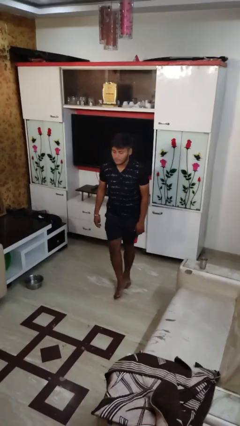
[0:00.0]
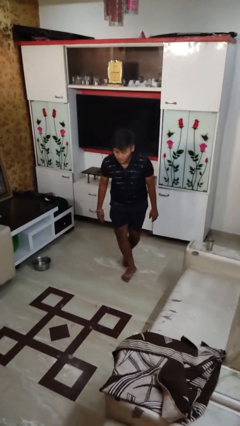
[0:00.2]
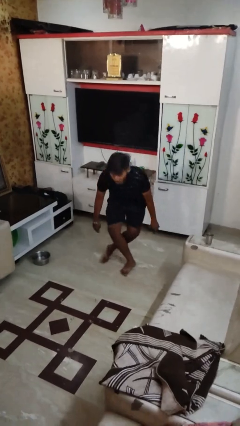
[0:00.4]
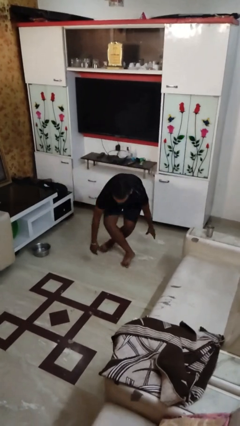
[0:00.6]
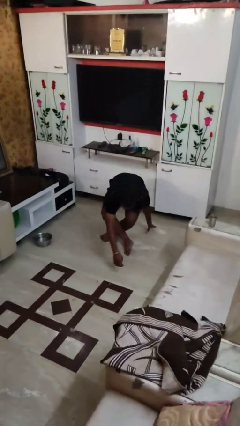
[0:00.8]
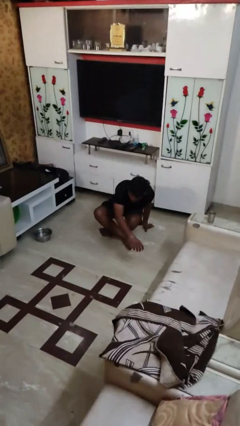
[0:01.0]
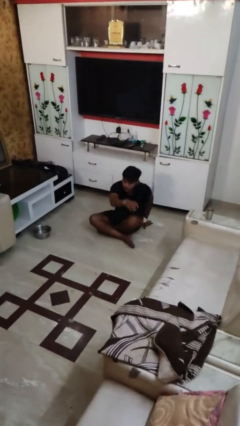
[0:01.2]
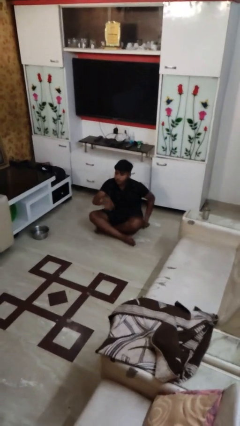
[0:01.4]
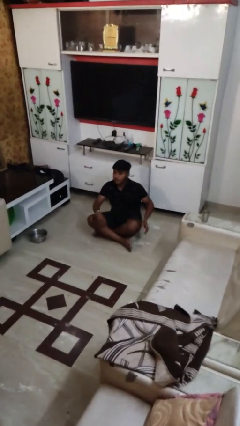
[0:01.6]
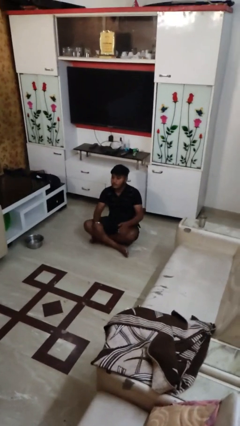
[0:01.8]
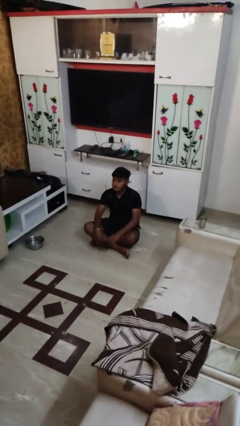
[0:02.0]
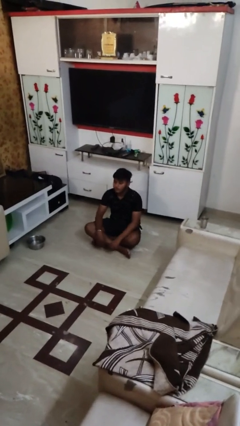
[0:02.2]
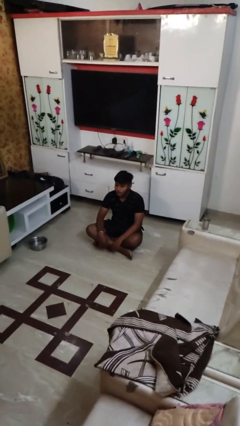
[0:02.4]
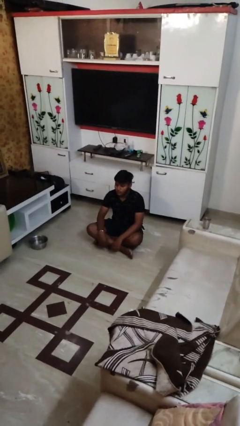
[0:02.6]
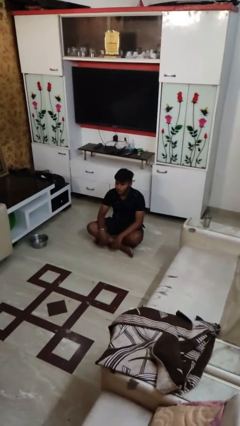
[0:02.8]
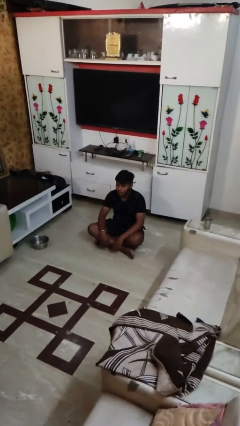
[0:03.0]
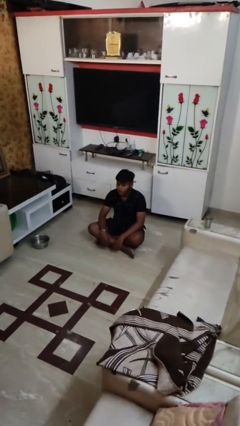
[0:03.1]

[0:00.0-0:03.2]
person sits crisscross

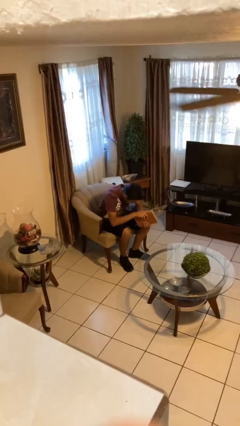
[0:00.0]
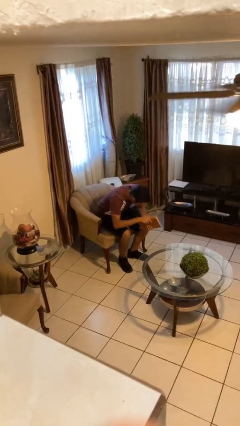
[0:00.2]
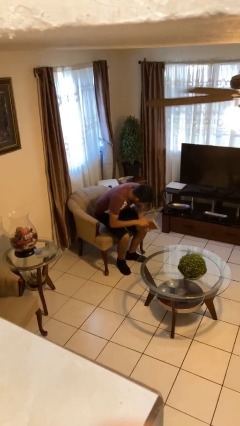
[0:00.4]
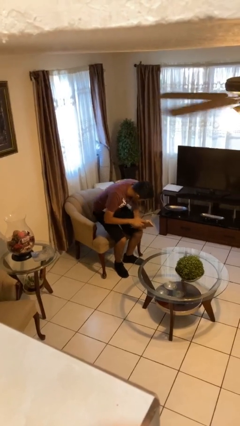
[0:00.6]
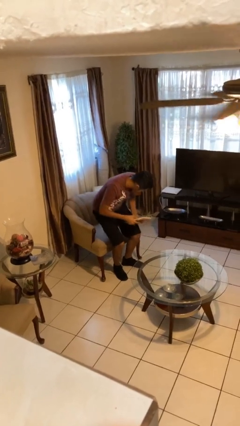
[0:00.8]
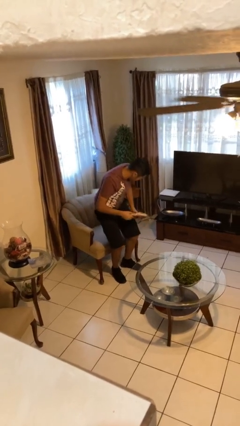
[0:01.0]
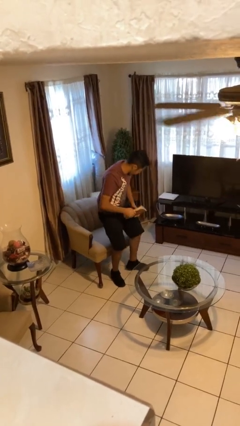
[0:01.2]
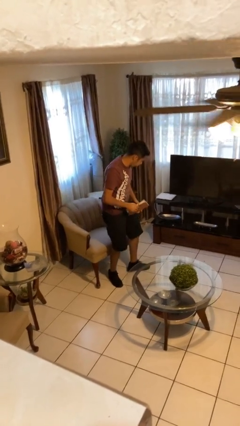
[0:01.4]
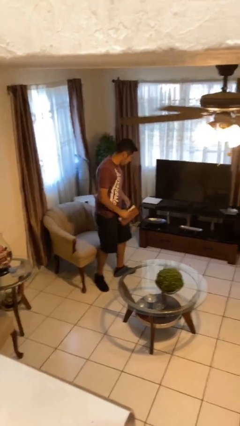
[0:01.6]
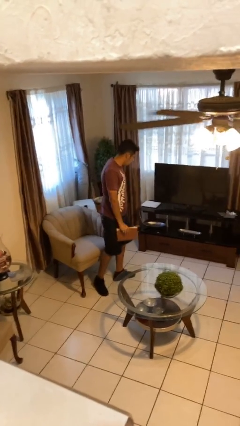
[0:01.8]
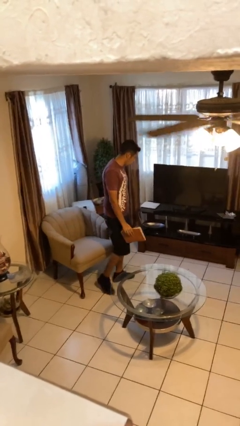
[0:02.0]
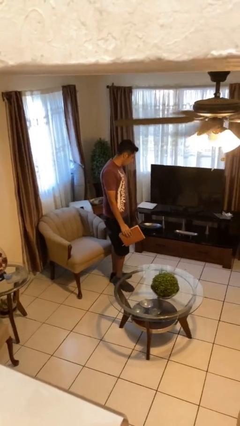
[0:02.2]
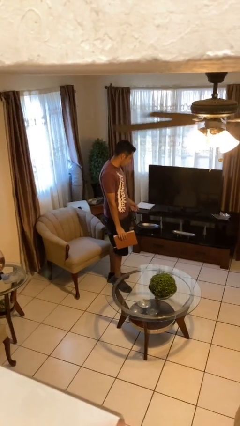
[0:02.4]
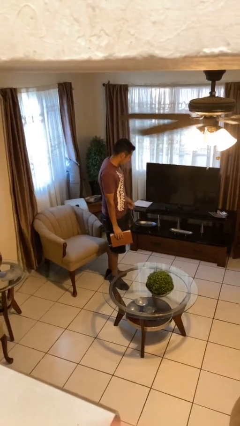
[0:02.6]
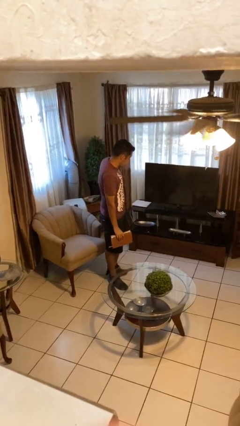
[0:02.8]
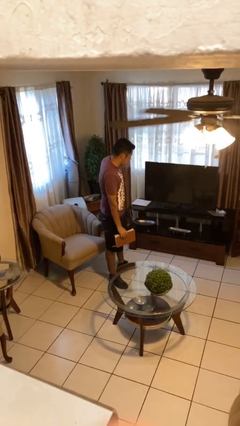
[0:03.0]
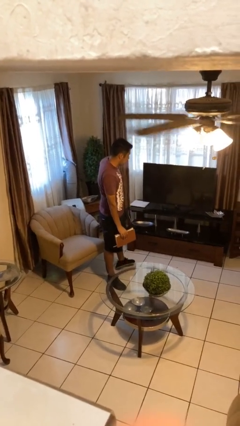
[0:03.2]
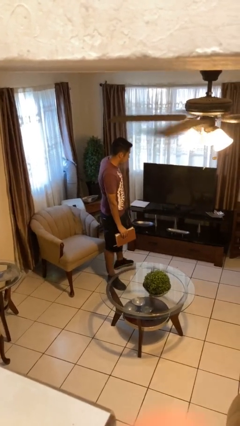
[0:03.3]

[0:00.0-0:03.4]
person stands up

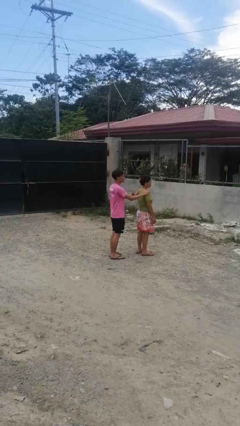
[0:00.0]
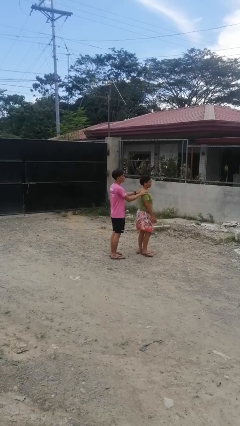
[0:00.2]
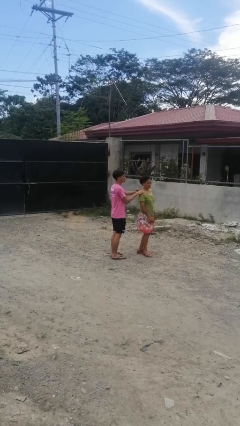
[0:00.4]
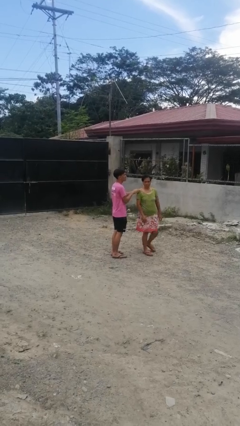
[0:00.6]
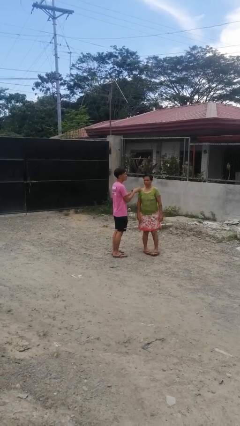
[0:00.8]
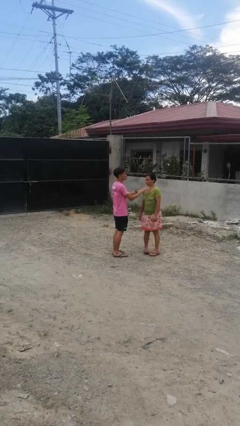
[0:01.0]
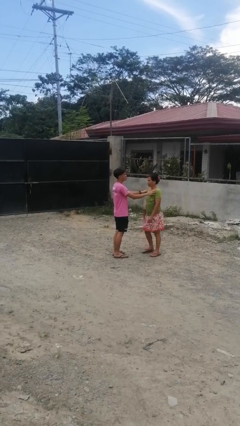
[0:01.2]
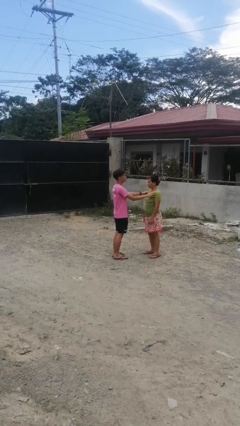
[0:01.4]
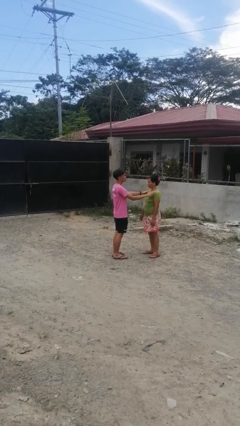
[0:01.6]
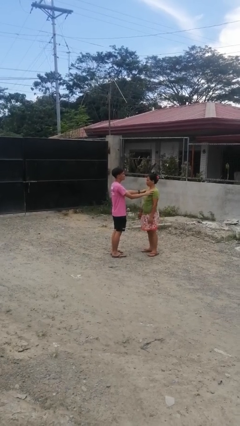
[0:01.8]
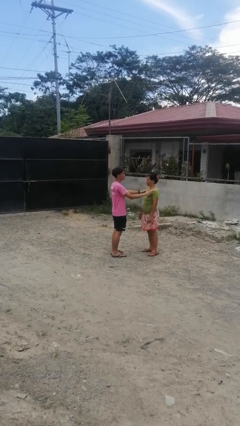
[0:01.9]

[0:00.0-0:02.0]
person spins person around

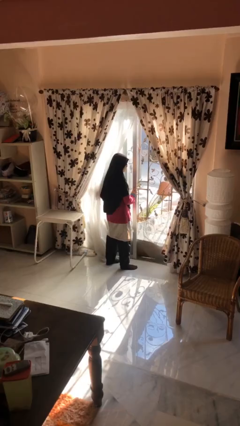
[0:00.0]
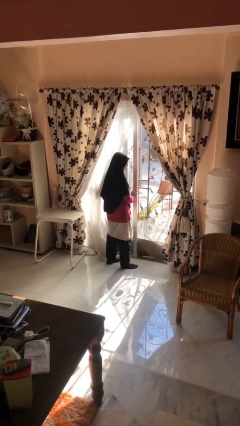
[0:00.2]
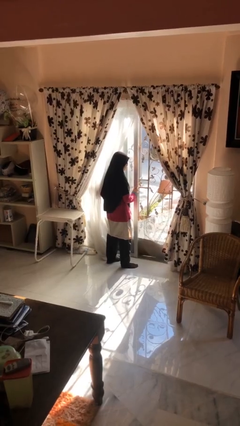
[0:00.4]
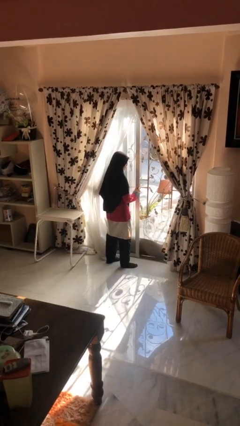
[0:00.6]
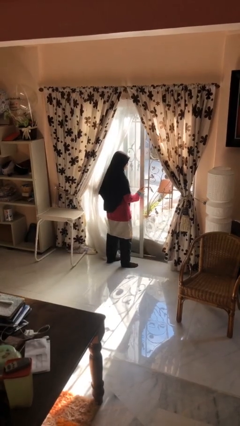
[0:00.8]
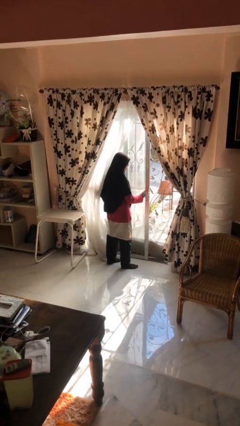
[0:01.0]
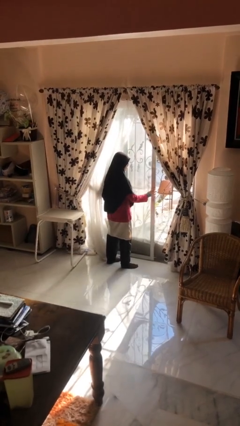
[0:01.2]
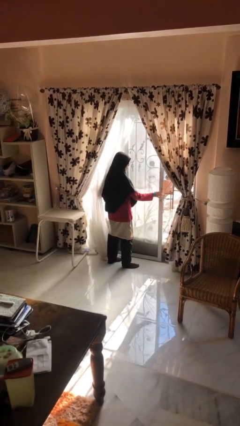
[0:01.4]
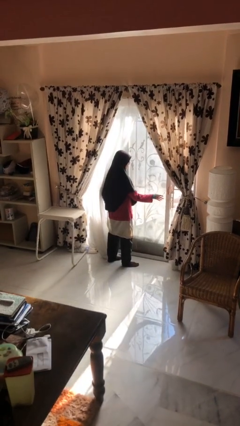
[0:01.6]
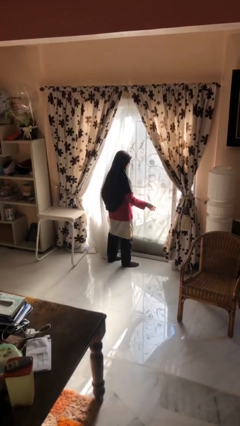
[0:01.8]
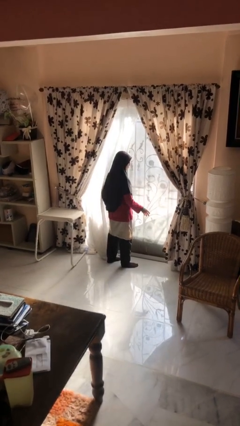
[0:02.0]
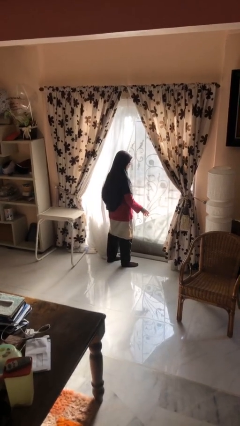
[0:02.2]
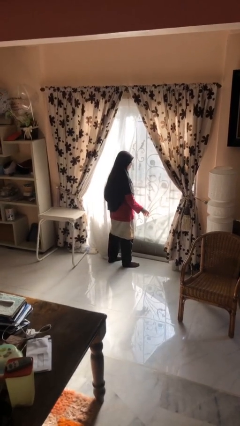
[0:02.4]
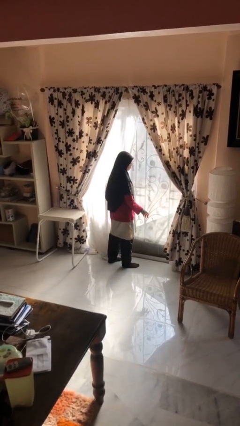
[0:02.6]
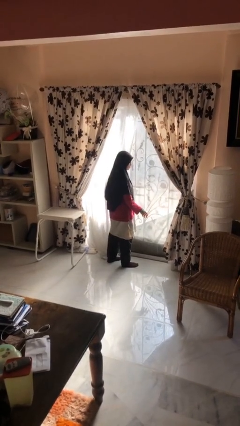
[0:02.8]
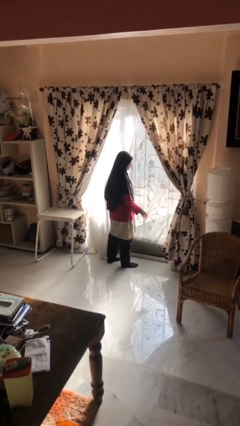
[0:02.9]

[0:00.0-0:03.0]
person closes sliding door

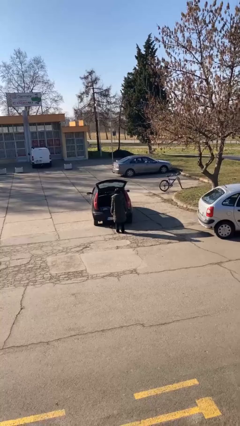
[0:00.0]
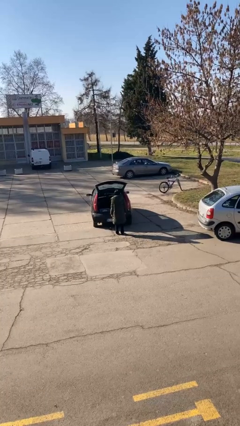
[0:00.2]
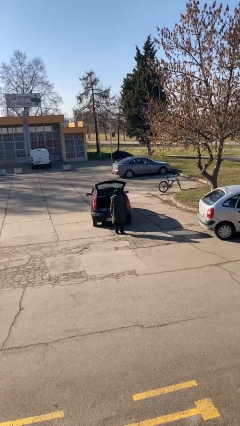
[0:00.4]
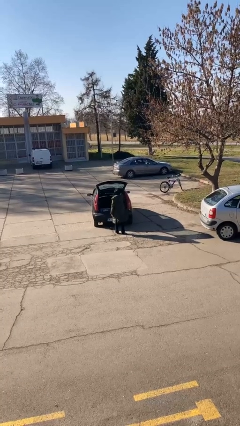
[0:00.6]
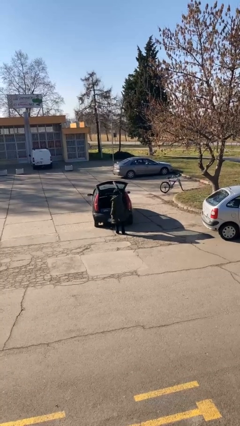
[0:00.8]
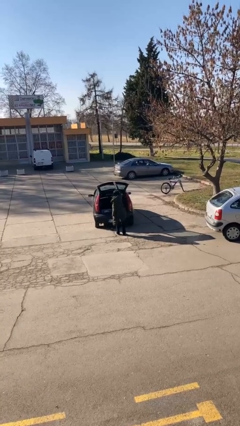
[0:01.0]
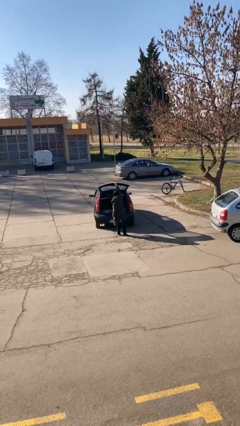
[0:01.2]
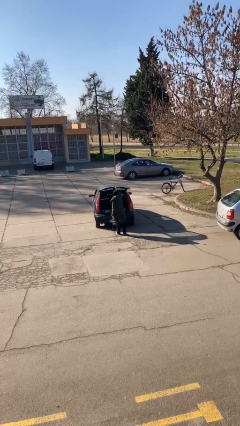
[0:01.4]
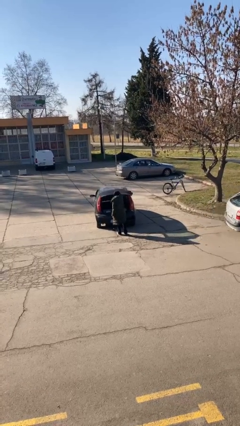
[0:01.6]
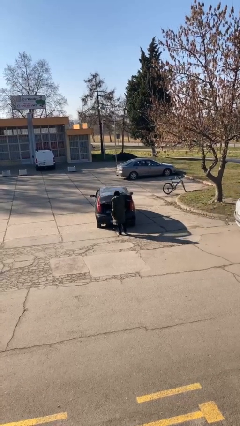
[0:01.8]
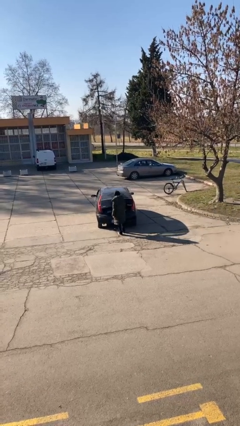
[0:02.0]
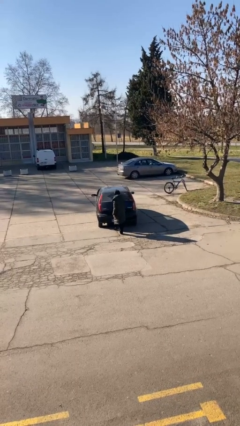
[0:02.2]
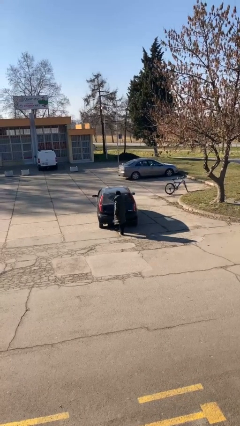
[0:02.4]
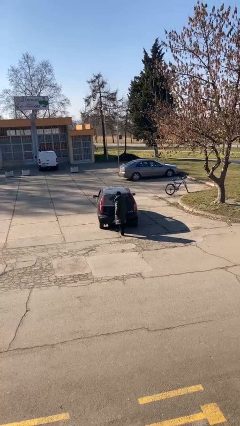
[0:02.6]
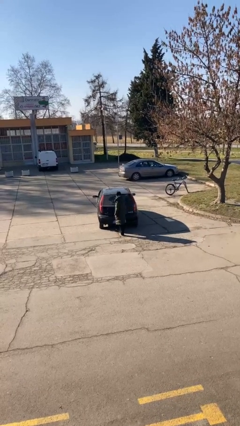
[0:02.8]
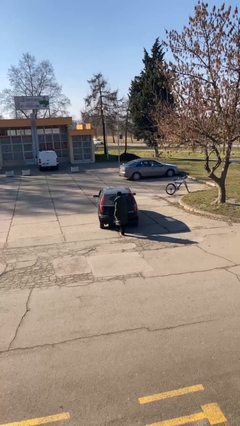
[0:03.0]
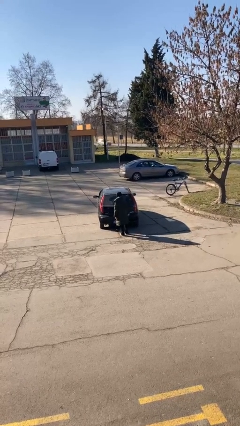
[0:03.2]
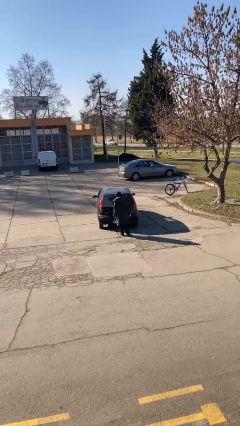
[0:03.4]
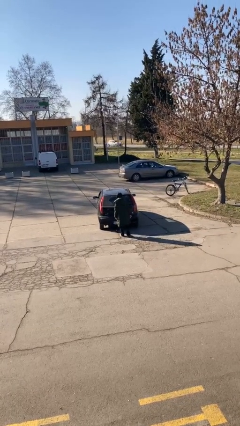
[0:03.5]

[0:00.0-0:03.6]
person closes car trunk

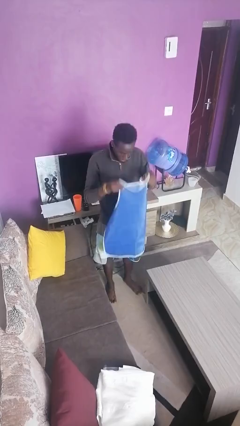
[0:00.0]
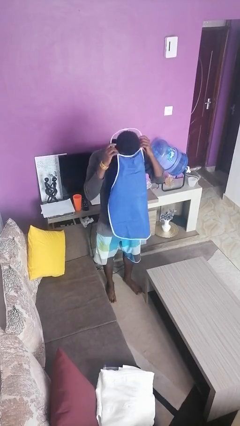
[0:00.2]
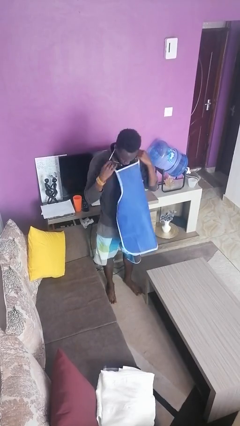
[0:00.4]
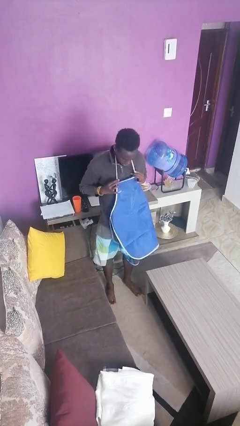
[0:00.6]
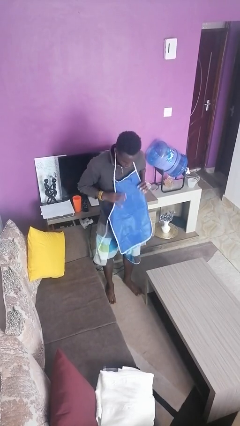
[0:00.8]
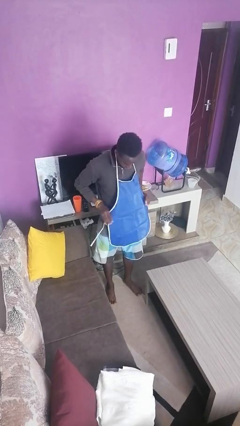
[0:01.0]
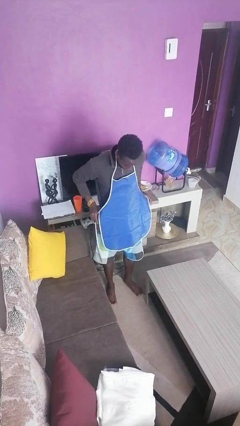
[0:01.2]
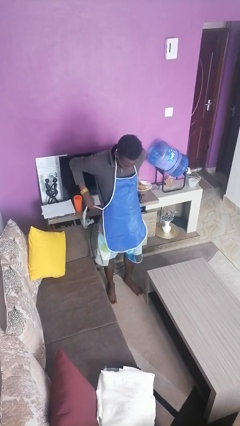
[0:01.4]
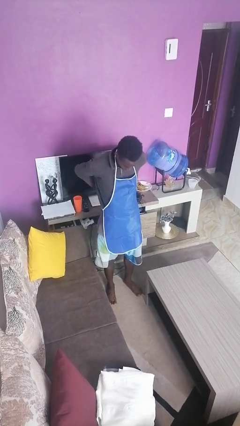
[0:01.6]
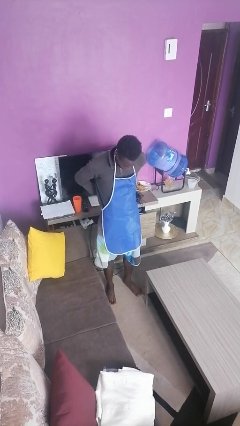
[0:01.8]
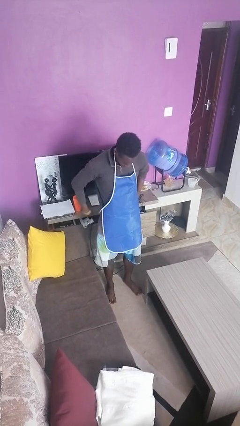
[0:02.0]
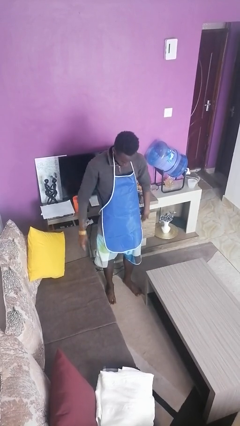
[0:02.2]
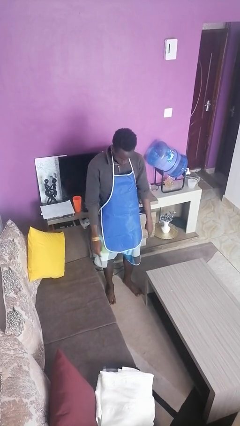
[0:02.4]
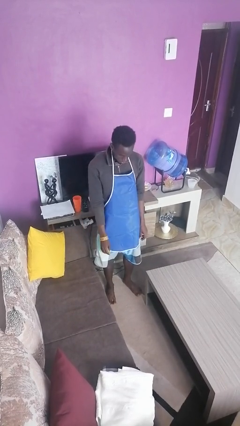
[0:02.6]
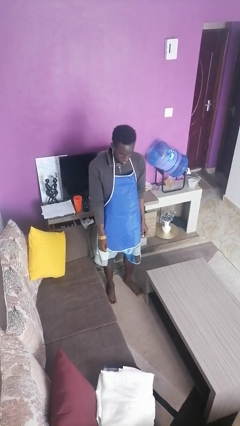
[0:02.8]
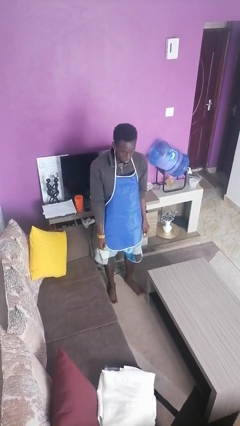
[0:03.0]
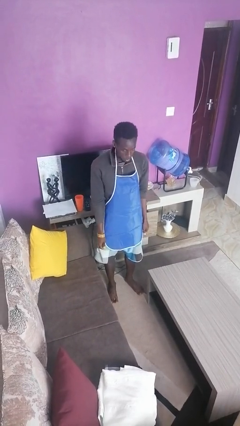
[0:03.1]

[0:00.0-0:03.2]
person puts on apron
